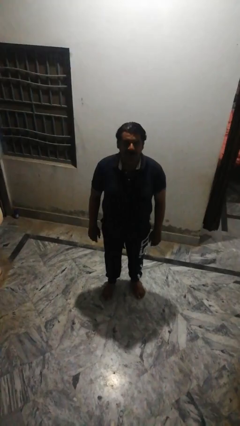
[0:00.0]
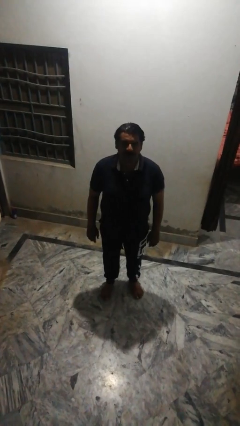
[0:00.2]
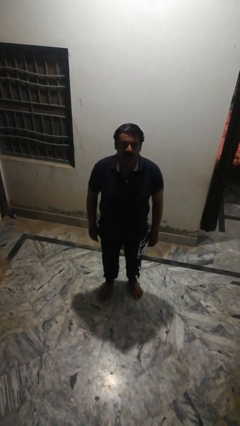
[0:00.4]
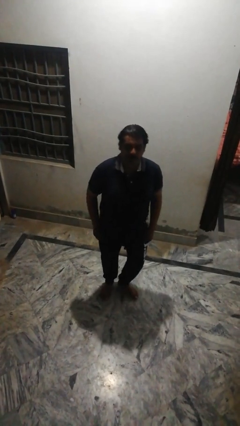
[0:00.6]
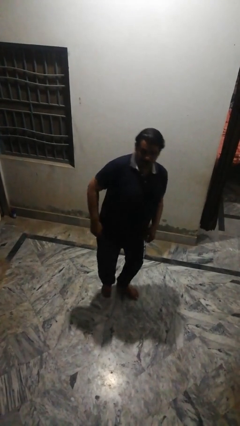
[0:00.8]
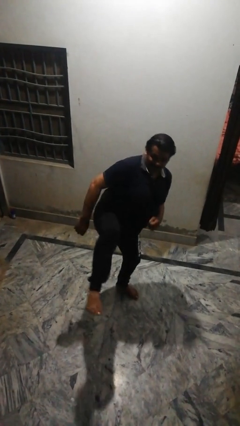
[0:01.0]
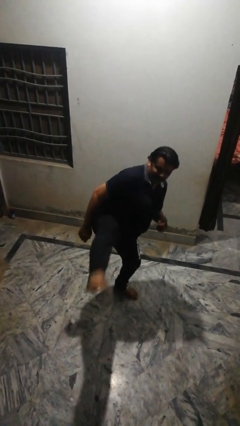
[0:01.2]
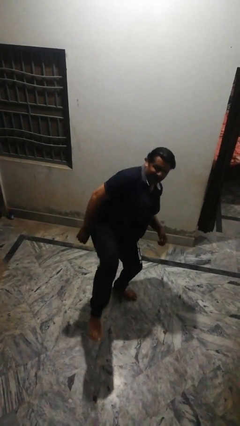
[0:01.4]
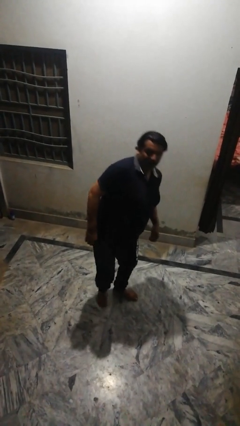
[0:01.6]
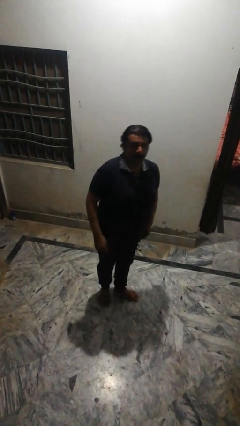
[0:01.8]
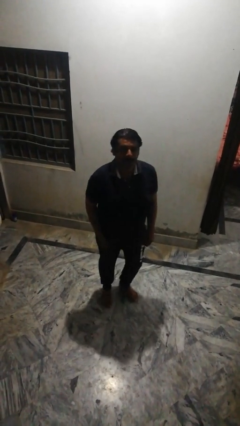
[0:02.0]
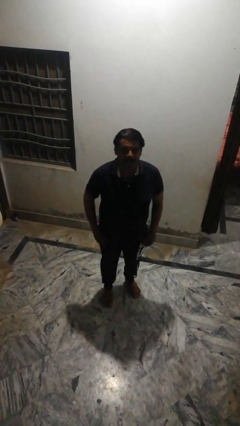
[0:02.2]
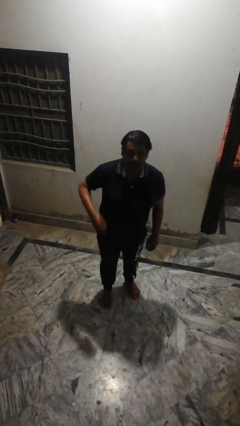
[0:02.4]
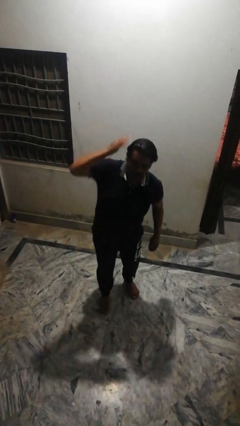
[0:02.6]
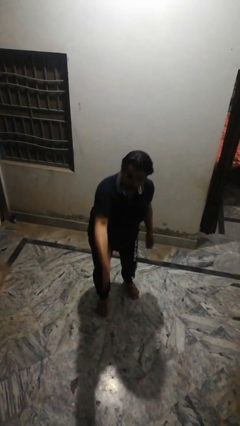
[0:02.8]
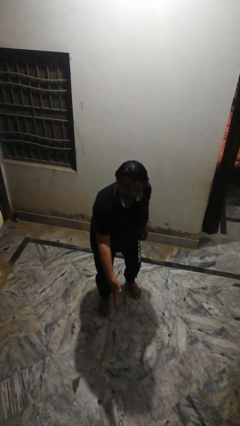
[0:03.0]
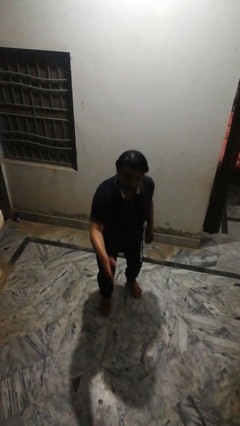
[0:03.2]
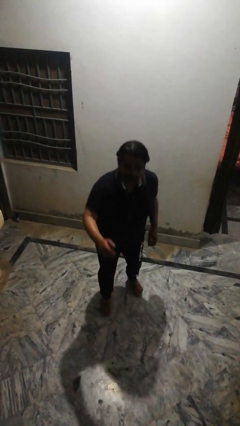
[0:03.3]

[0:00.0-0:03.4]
person karate kicks

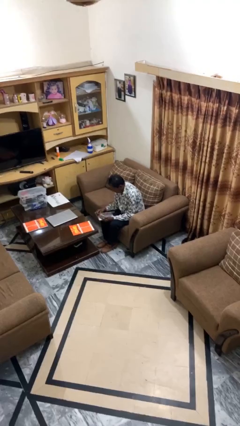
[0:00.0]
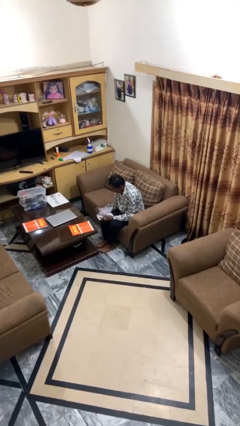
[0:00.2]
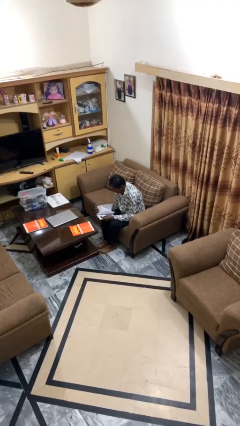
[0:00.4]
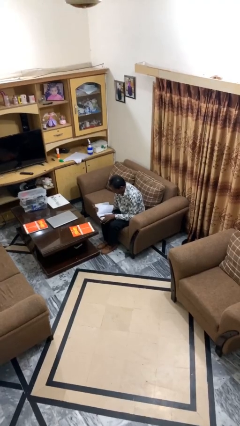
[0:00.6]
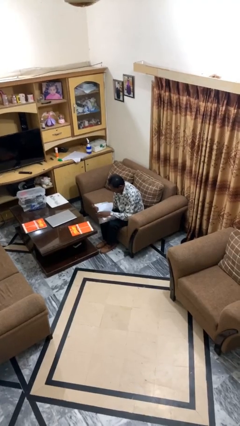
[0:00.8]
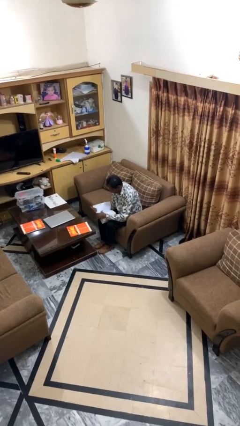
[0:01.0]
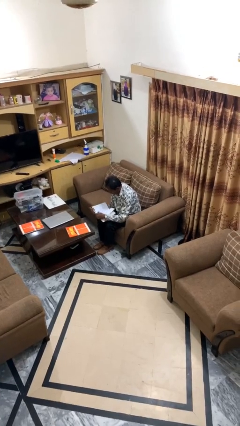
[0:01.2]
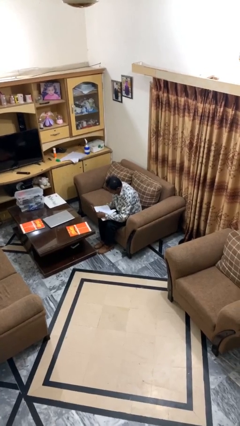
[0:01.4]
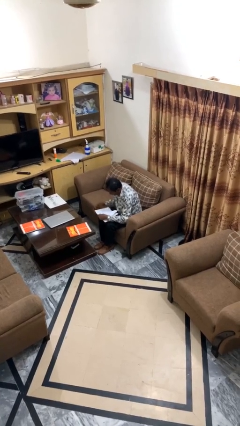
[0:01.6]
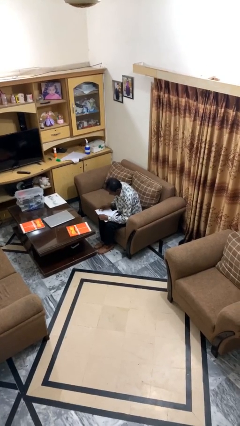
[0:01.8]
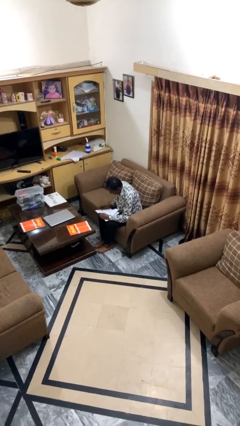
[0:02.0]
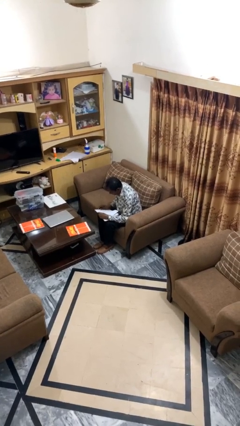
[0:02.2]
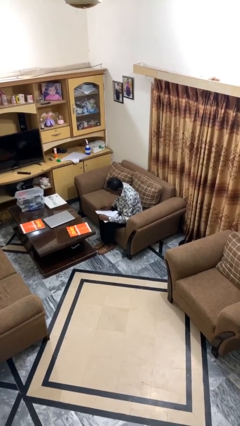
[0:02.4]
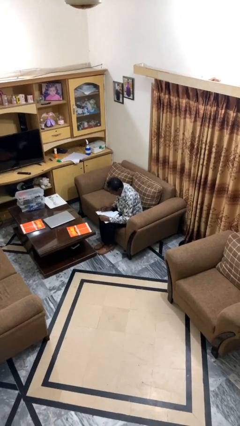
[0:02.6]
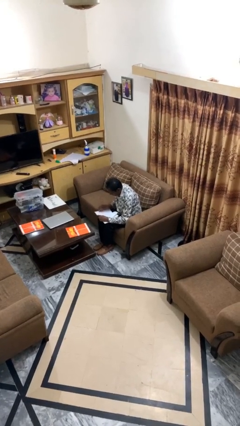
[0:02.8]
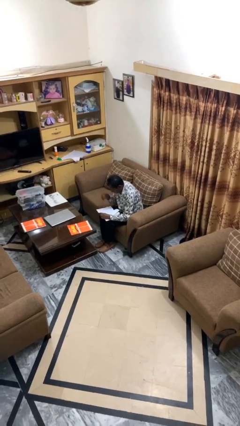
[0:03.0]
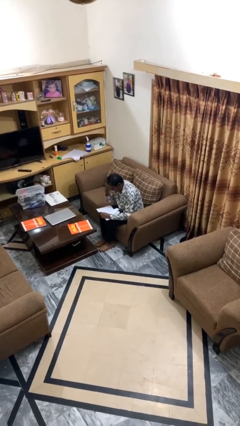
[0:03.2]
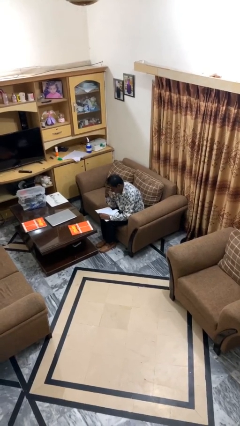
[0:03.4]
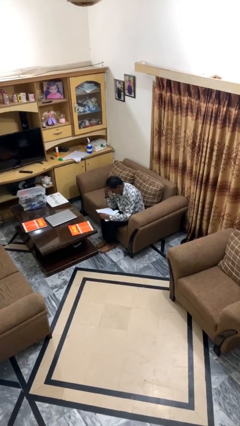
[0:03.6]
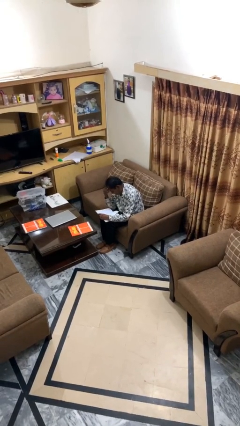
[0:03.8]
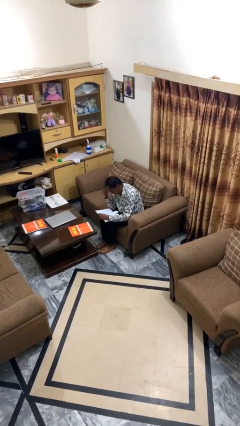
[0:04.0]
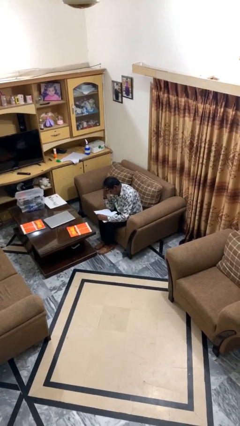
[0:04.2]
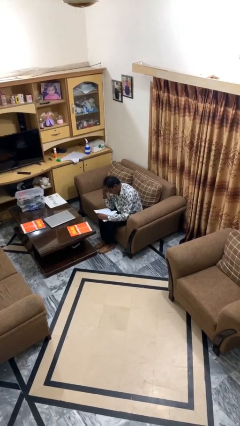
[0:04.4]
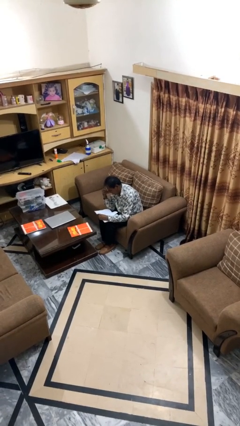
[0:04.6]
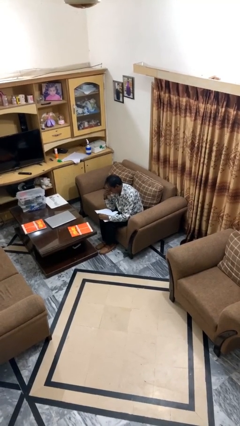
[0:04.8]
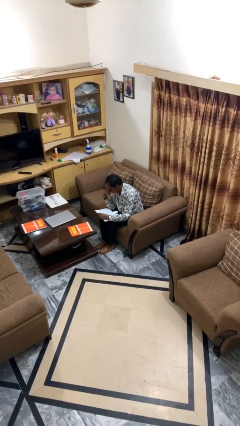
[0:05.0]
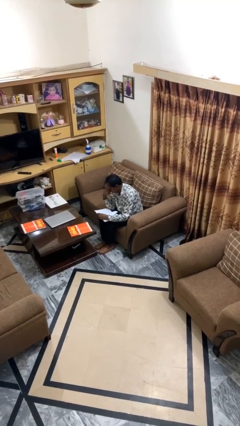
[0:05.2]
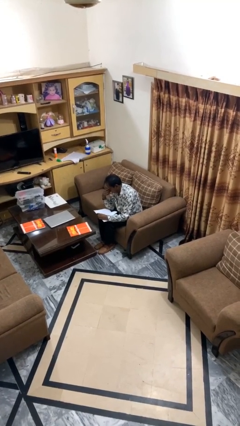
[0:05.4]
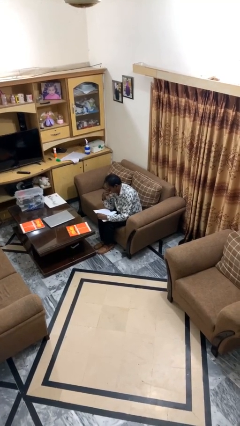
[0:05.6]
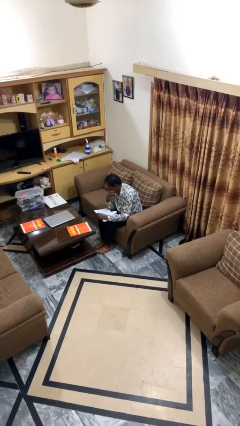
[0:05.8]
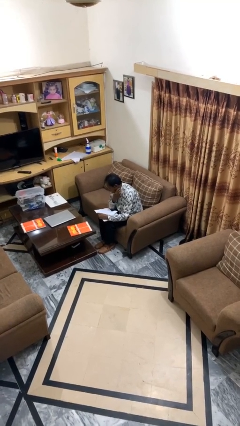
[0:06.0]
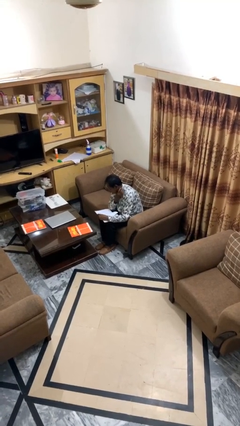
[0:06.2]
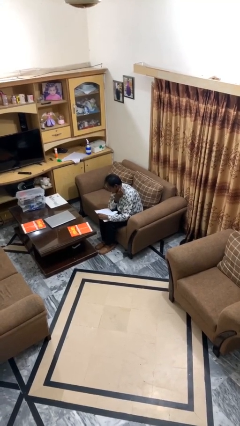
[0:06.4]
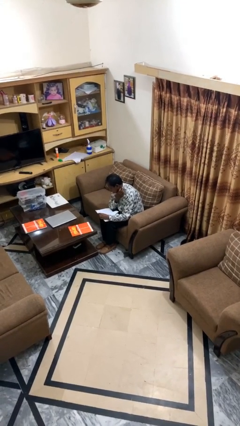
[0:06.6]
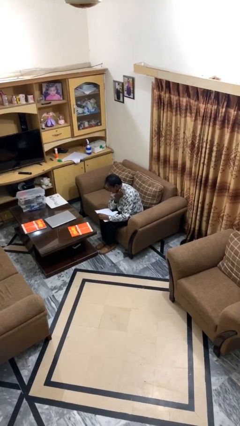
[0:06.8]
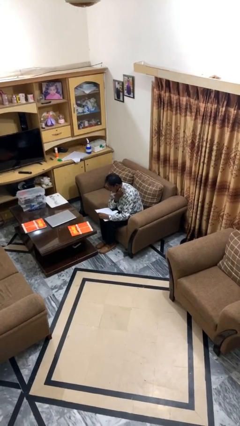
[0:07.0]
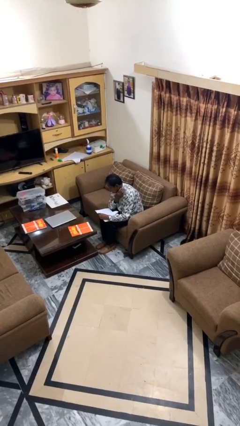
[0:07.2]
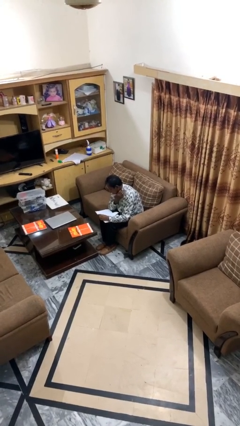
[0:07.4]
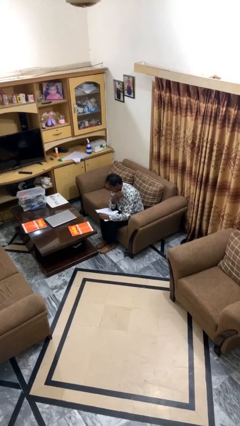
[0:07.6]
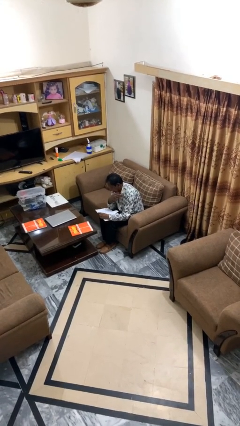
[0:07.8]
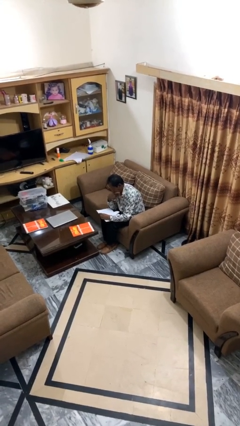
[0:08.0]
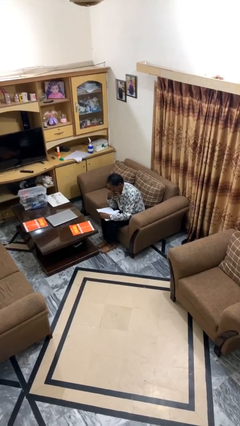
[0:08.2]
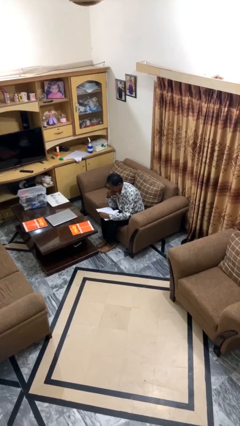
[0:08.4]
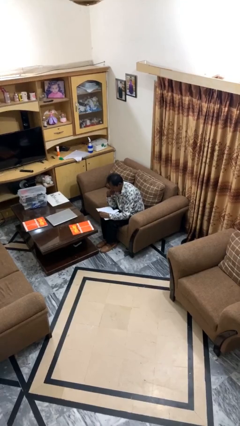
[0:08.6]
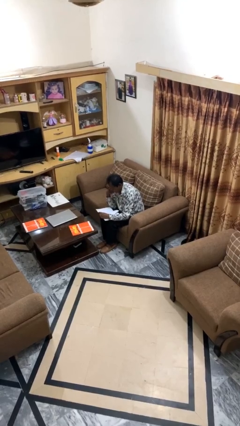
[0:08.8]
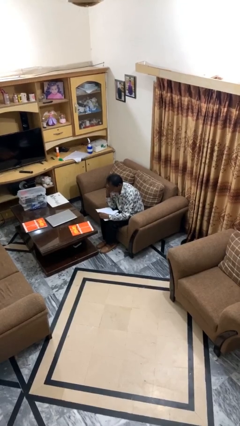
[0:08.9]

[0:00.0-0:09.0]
person reads document

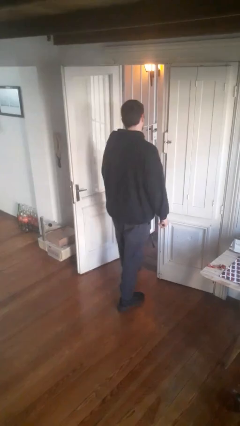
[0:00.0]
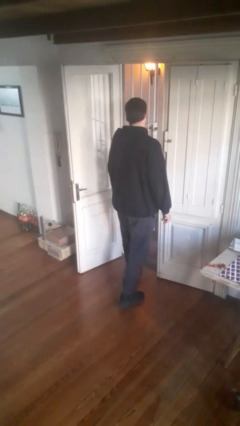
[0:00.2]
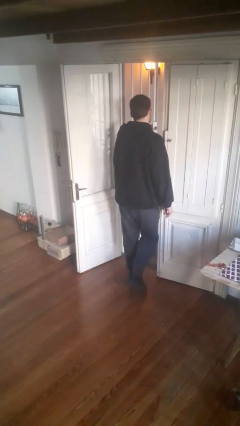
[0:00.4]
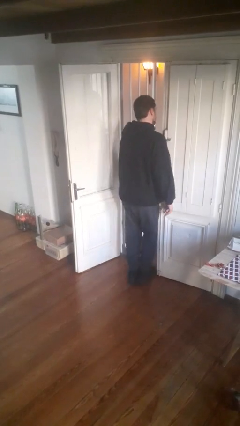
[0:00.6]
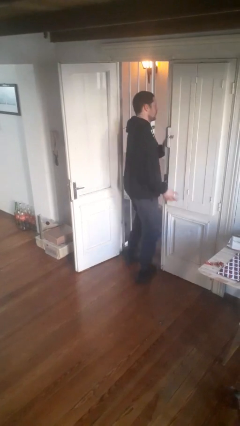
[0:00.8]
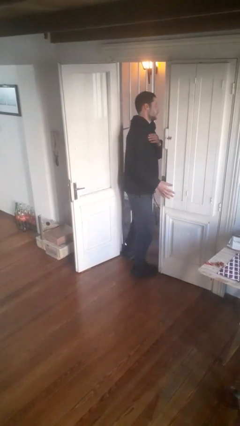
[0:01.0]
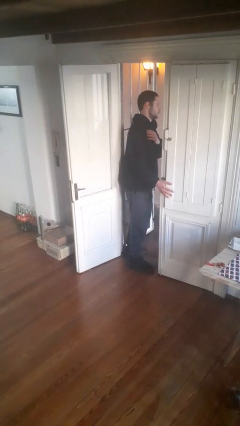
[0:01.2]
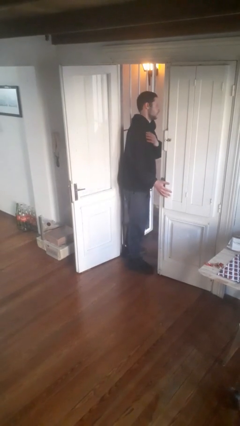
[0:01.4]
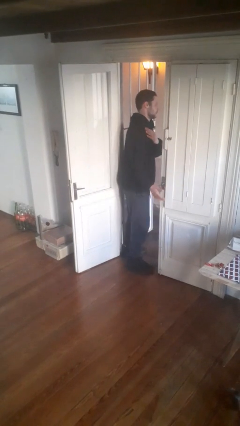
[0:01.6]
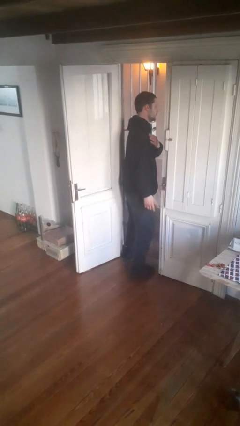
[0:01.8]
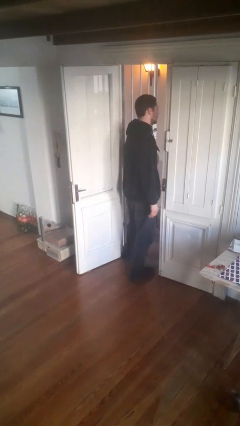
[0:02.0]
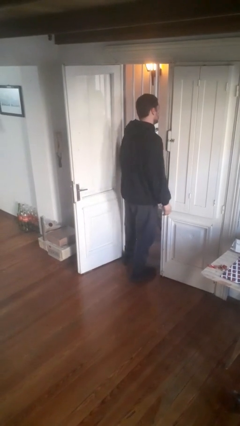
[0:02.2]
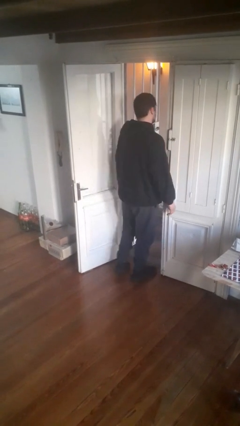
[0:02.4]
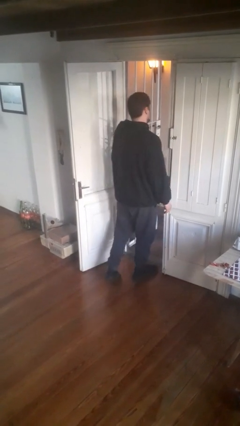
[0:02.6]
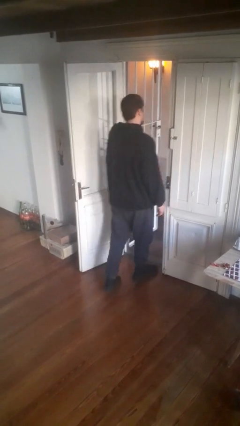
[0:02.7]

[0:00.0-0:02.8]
person bumps into wall

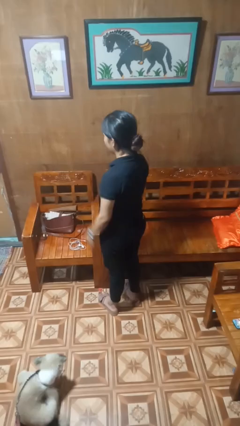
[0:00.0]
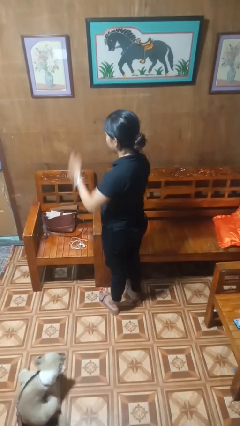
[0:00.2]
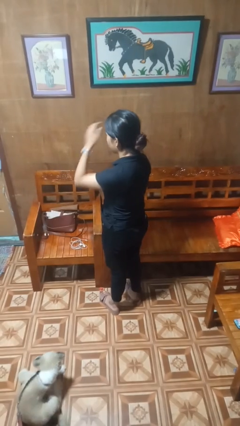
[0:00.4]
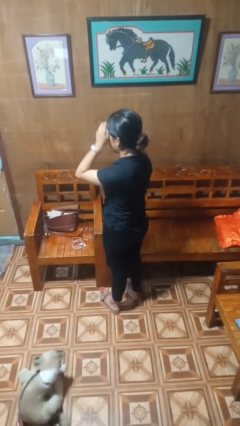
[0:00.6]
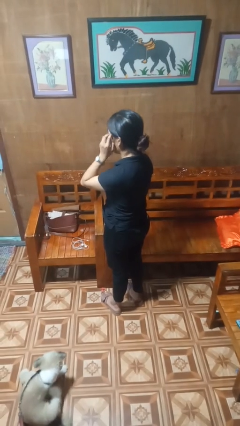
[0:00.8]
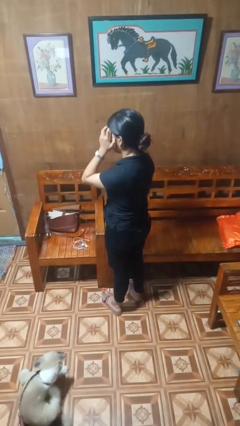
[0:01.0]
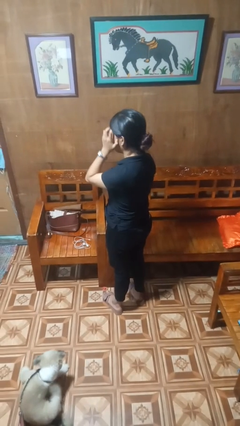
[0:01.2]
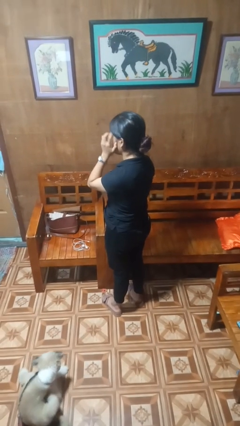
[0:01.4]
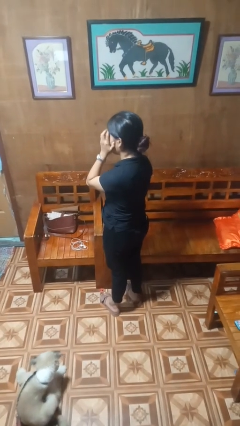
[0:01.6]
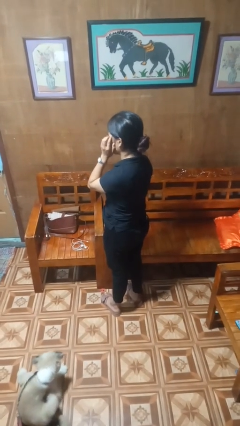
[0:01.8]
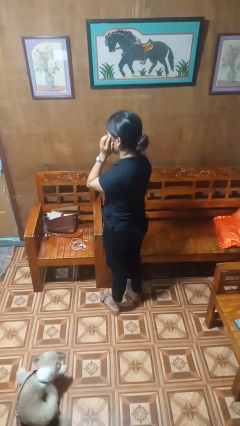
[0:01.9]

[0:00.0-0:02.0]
person scratches face

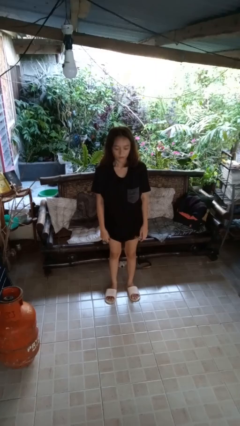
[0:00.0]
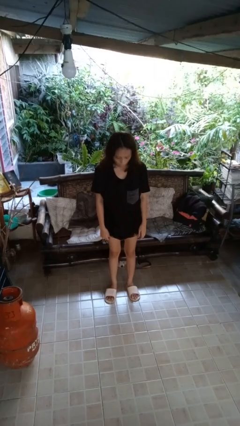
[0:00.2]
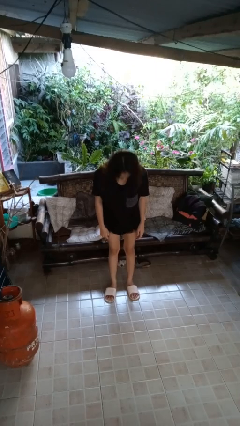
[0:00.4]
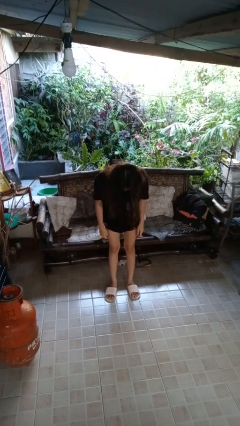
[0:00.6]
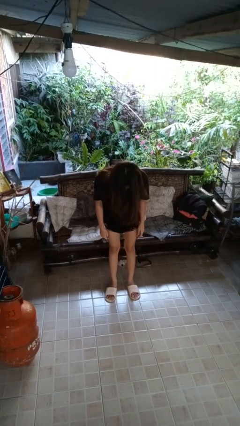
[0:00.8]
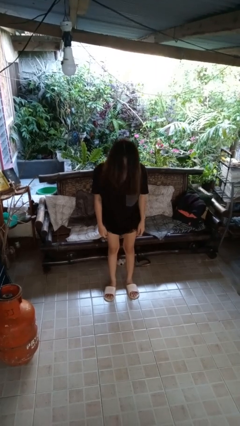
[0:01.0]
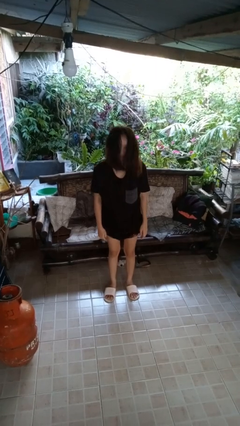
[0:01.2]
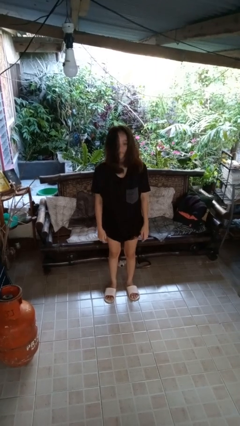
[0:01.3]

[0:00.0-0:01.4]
person bows
